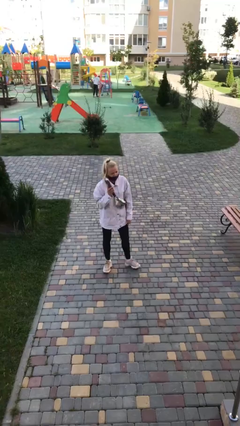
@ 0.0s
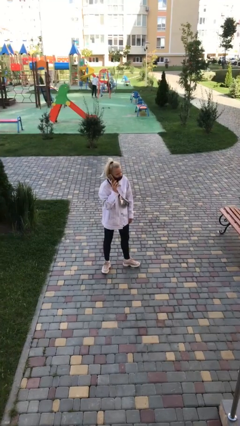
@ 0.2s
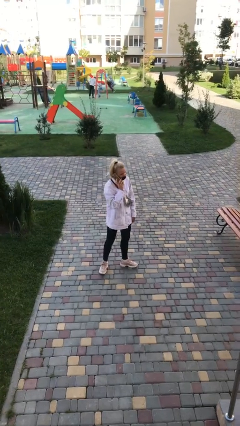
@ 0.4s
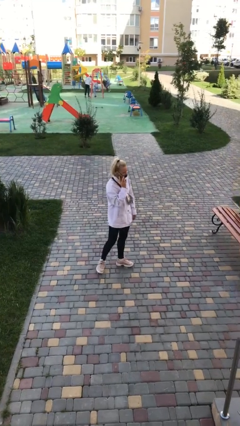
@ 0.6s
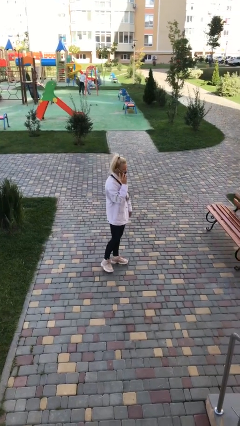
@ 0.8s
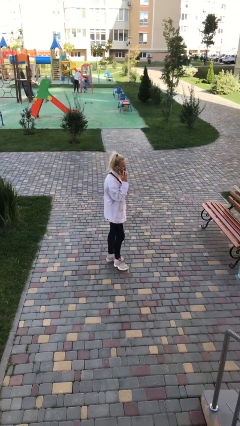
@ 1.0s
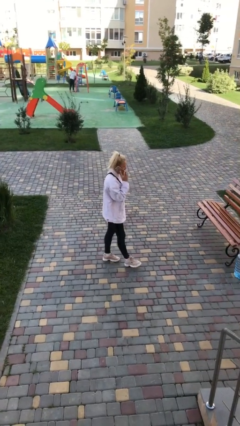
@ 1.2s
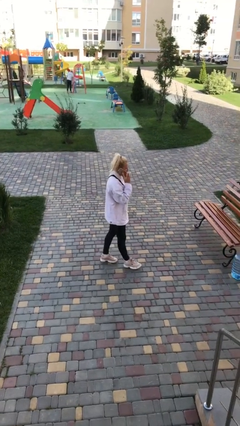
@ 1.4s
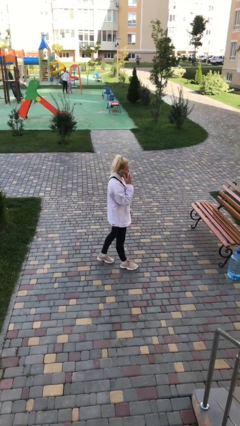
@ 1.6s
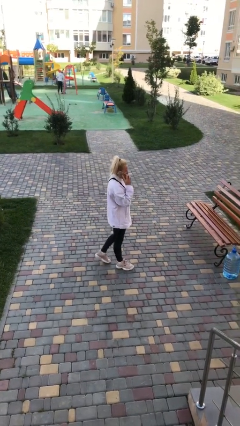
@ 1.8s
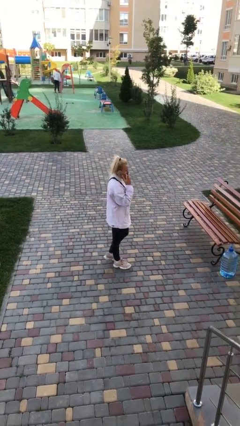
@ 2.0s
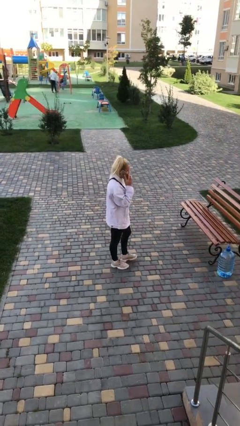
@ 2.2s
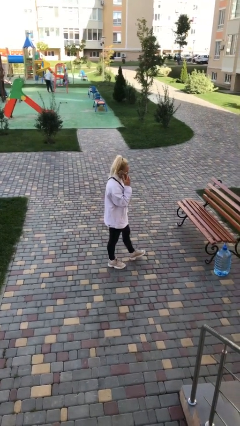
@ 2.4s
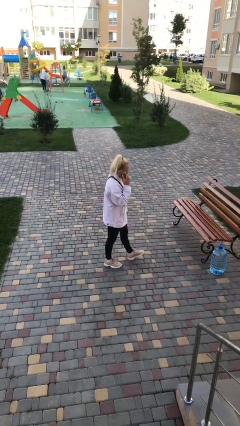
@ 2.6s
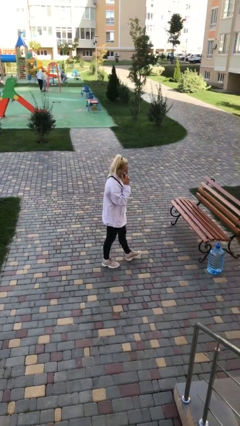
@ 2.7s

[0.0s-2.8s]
person talks on phone

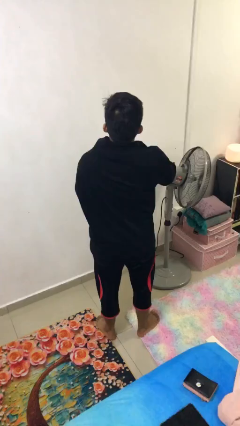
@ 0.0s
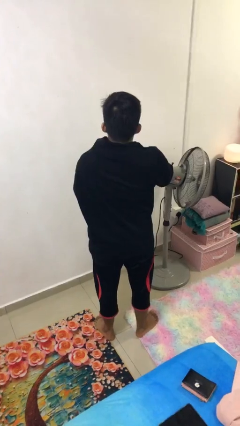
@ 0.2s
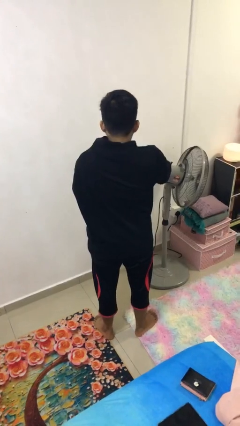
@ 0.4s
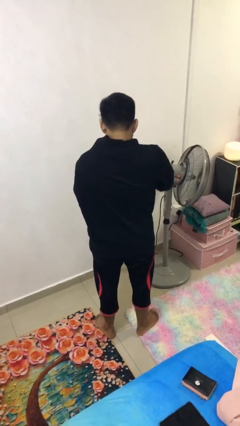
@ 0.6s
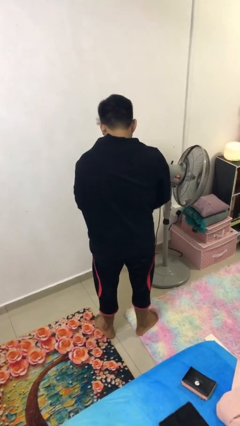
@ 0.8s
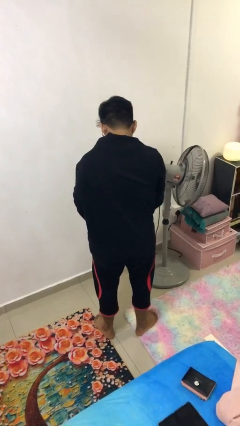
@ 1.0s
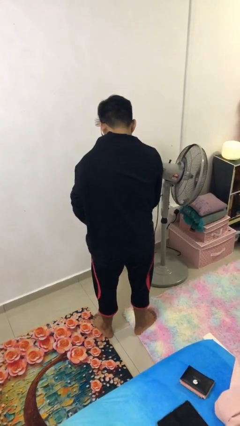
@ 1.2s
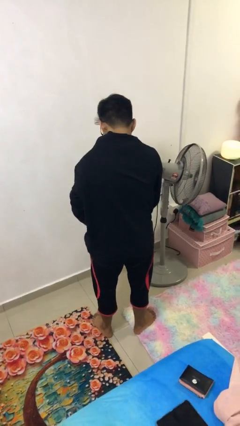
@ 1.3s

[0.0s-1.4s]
person unzips jacket

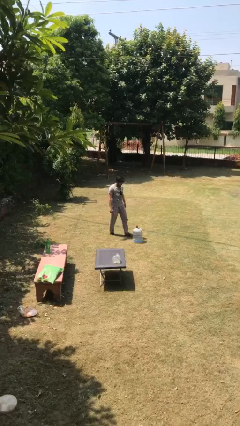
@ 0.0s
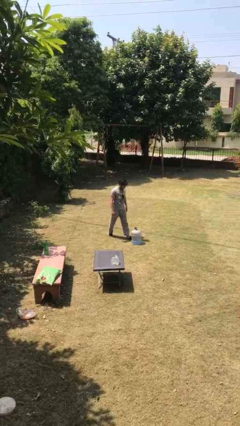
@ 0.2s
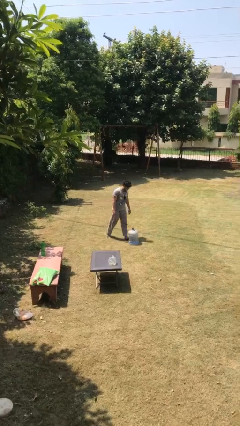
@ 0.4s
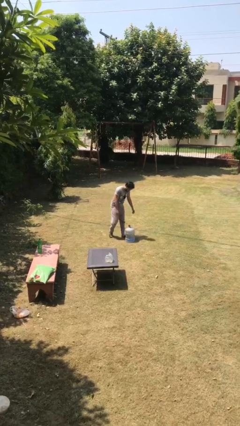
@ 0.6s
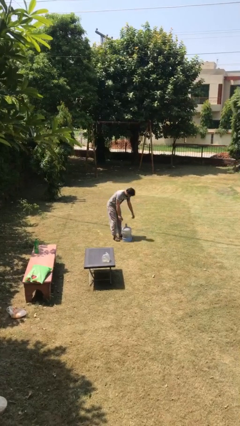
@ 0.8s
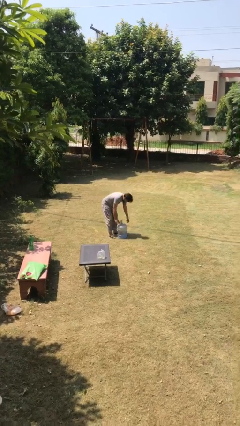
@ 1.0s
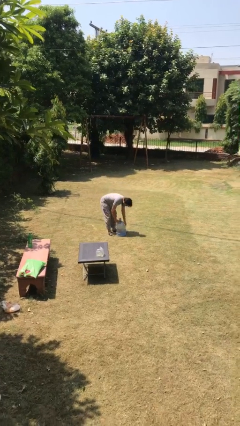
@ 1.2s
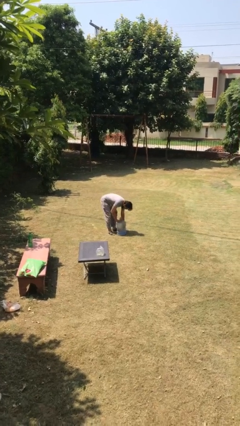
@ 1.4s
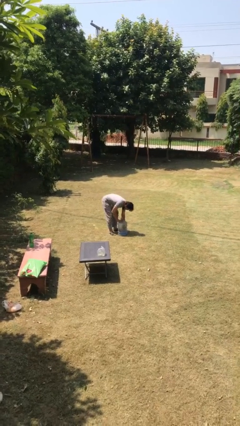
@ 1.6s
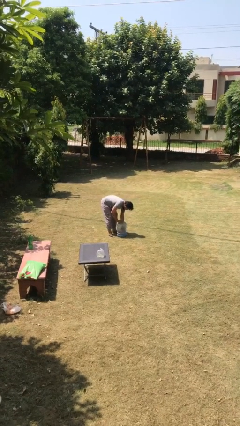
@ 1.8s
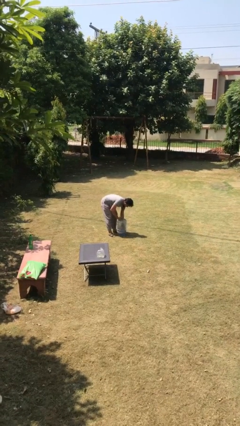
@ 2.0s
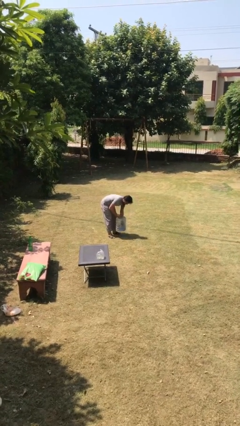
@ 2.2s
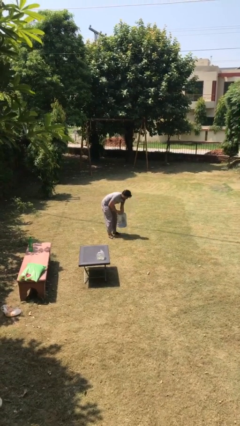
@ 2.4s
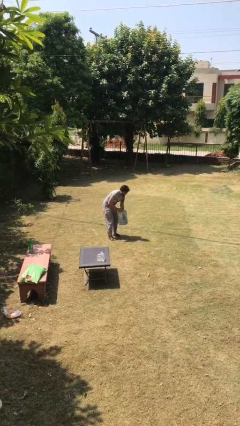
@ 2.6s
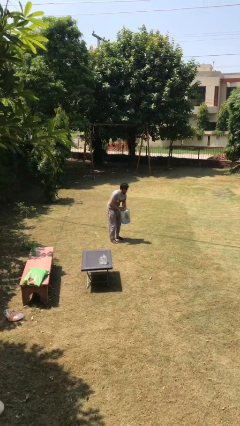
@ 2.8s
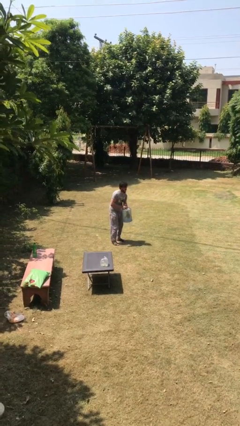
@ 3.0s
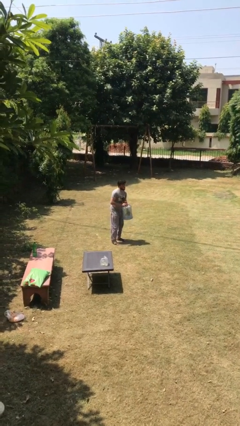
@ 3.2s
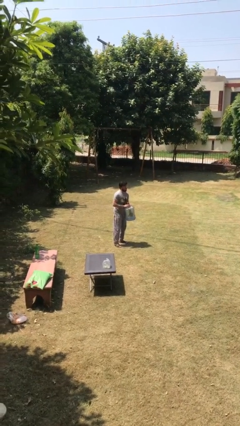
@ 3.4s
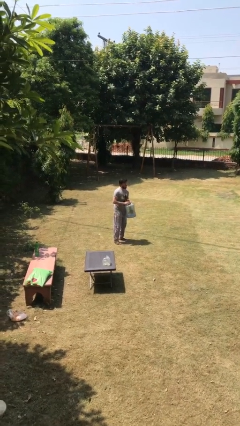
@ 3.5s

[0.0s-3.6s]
person picks up object from floor

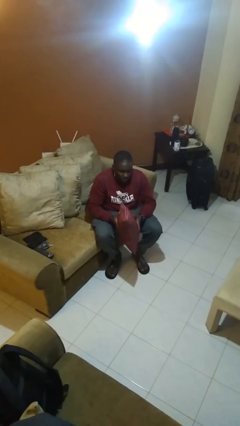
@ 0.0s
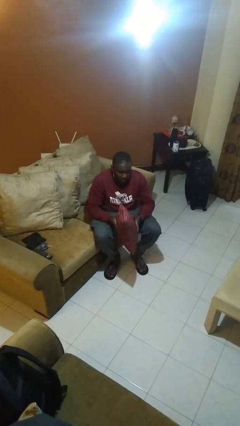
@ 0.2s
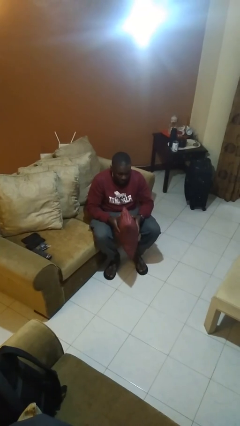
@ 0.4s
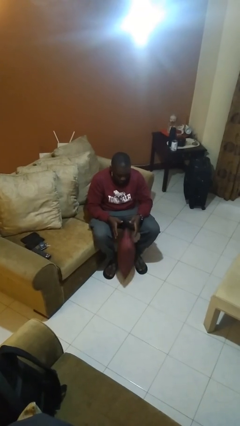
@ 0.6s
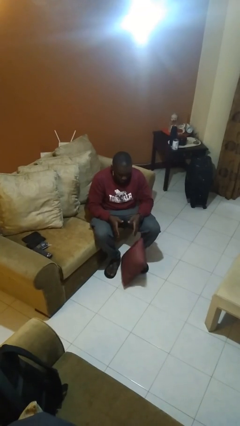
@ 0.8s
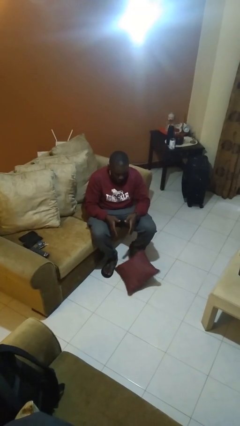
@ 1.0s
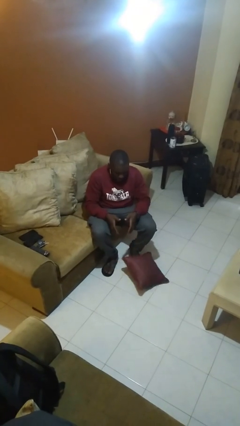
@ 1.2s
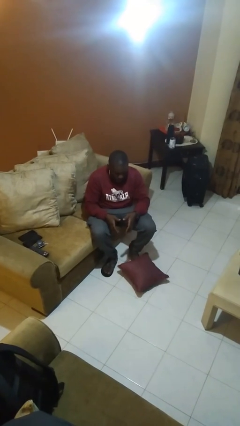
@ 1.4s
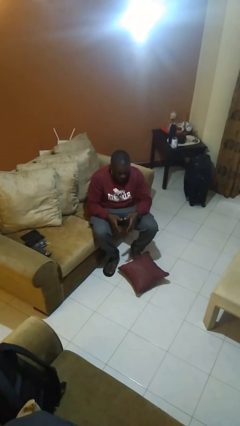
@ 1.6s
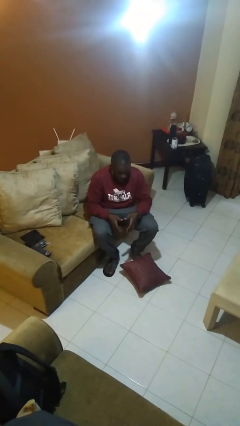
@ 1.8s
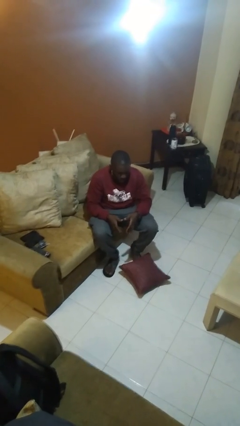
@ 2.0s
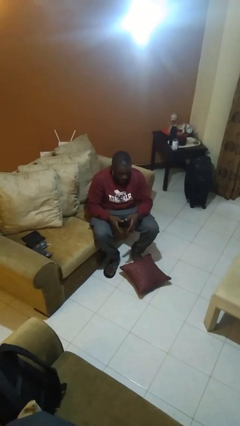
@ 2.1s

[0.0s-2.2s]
person drops object

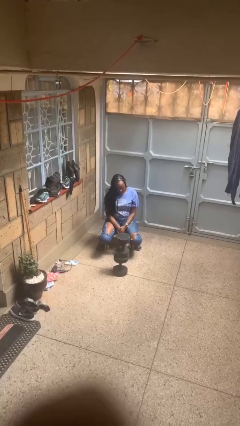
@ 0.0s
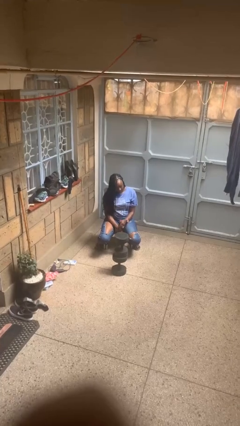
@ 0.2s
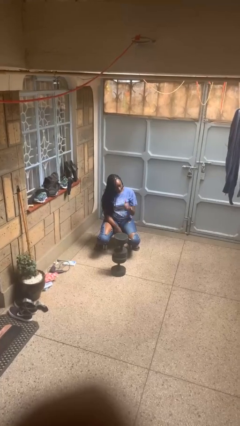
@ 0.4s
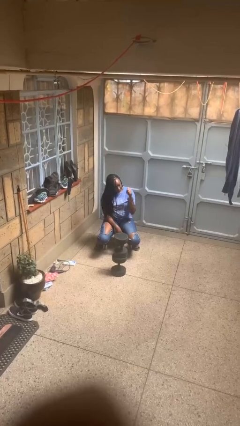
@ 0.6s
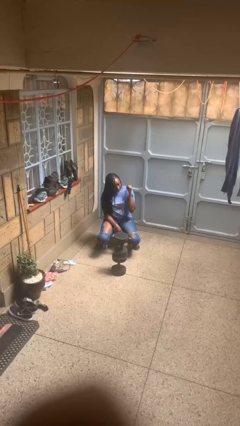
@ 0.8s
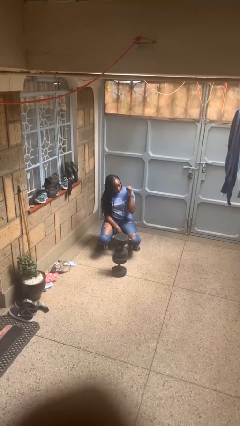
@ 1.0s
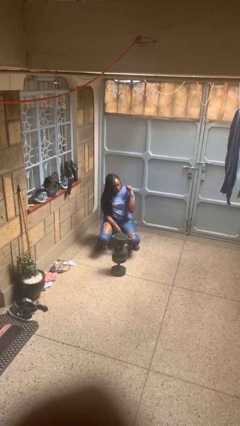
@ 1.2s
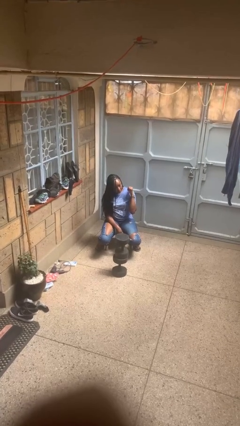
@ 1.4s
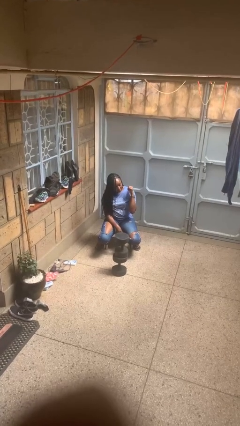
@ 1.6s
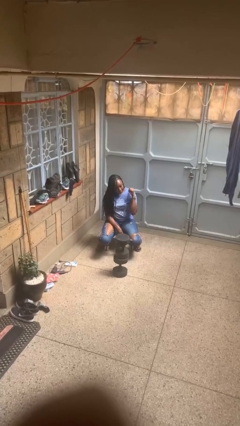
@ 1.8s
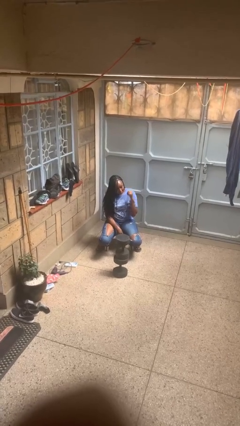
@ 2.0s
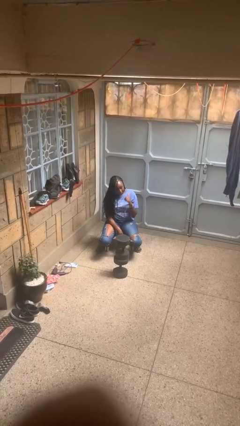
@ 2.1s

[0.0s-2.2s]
person gestures behind me

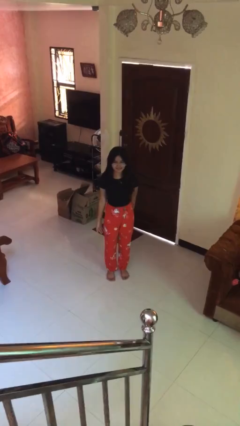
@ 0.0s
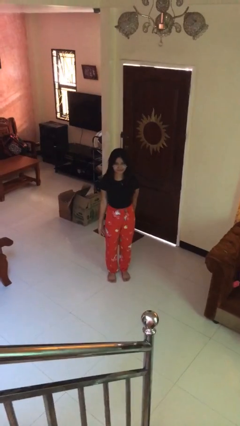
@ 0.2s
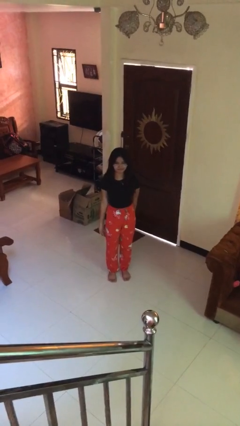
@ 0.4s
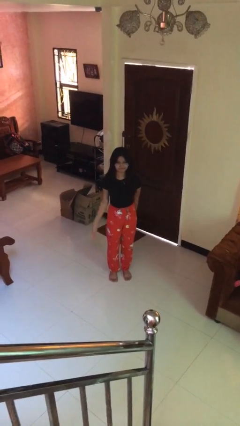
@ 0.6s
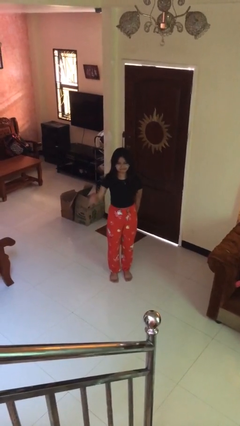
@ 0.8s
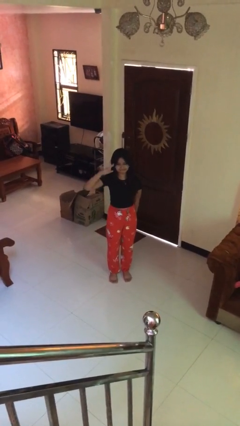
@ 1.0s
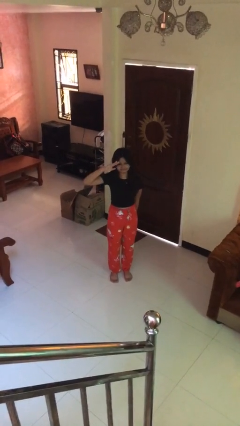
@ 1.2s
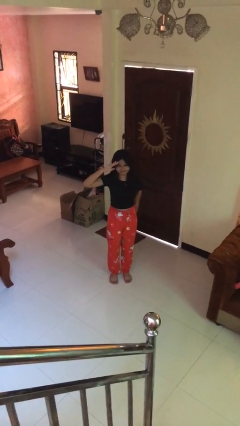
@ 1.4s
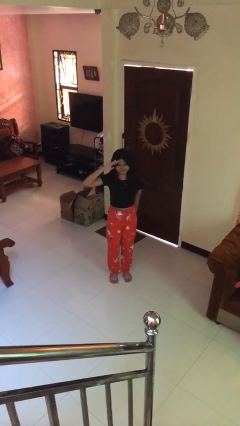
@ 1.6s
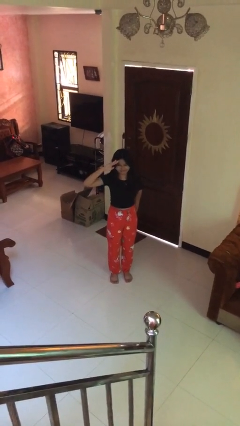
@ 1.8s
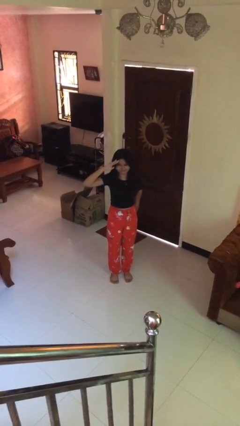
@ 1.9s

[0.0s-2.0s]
person salutes

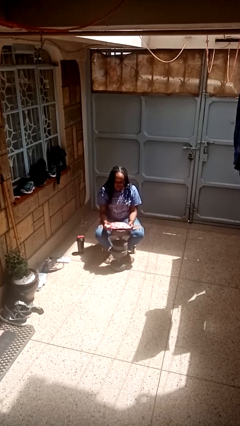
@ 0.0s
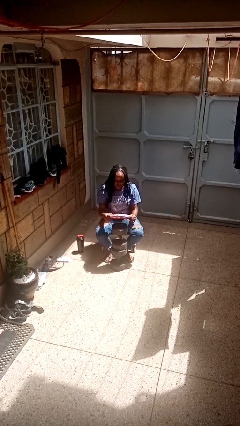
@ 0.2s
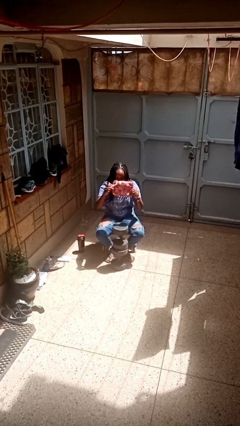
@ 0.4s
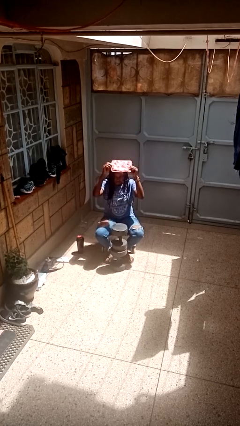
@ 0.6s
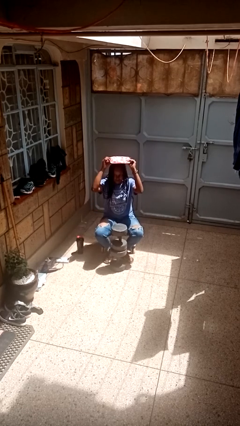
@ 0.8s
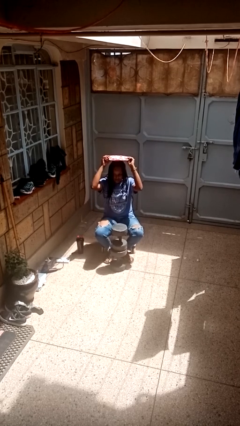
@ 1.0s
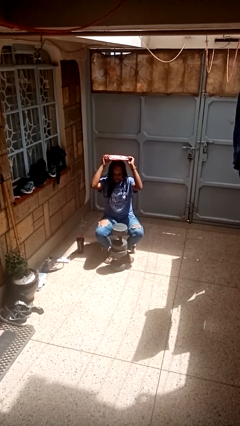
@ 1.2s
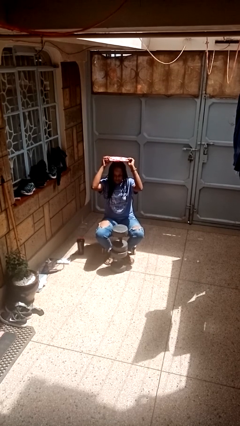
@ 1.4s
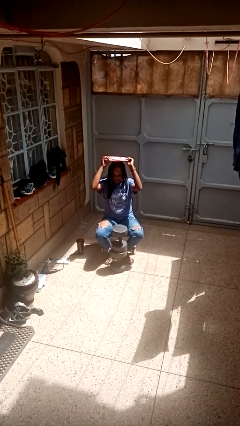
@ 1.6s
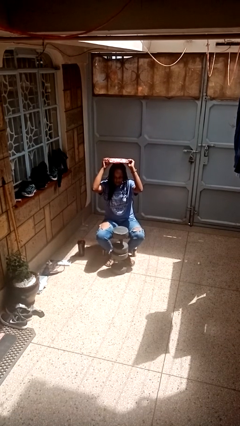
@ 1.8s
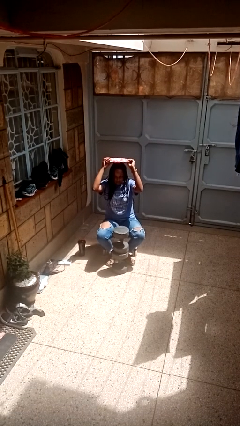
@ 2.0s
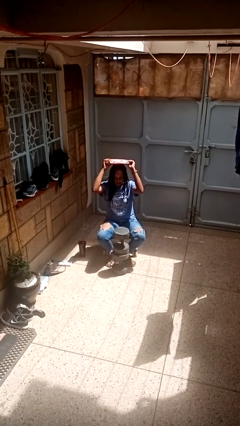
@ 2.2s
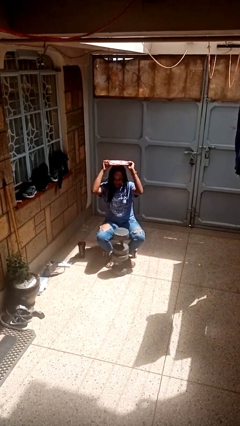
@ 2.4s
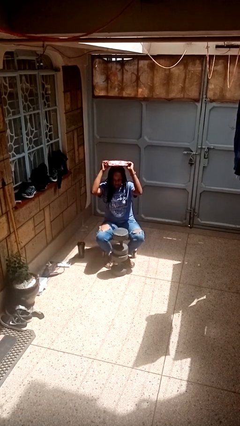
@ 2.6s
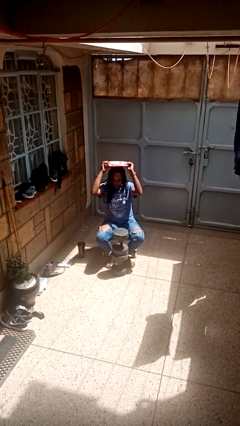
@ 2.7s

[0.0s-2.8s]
person holds object above head
